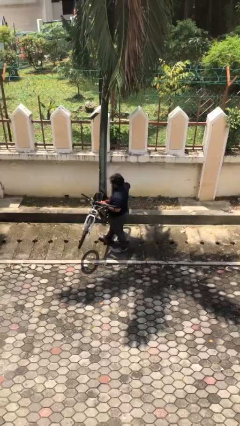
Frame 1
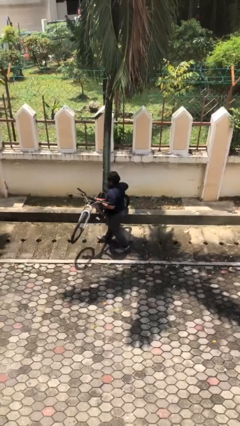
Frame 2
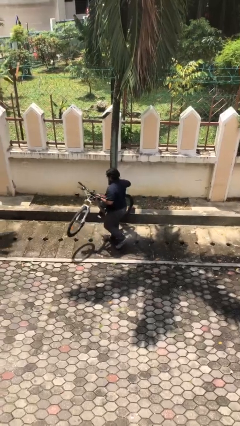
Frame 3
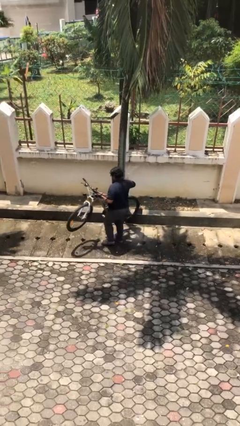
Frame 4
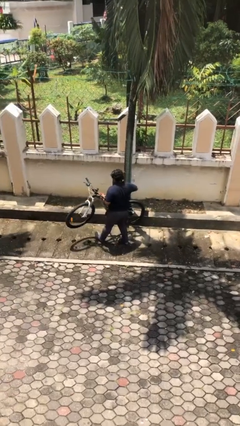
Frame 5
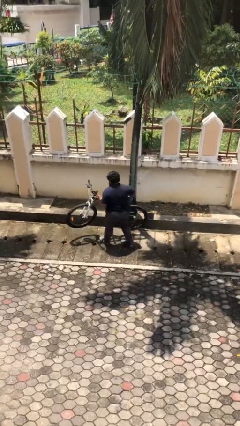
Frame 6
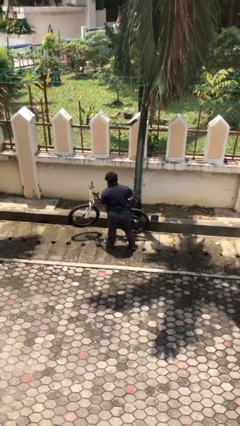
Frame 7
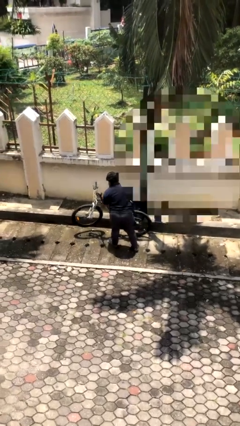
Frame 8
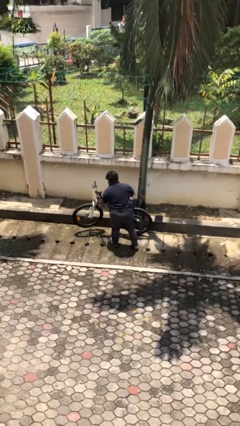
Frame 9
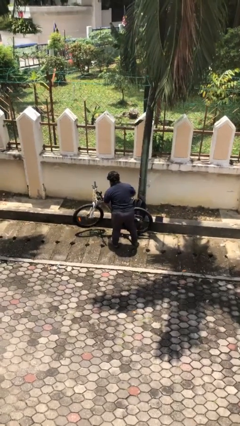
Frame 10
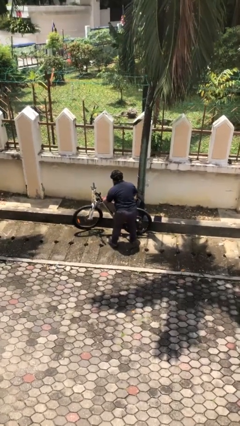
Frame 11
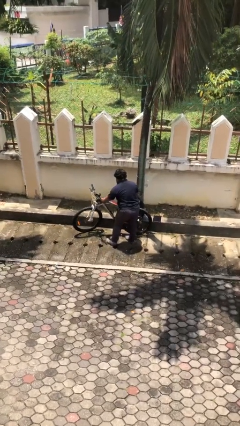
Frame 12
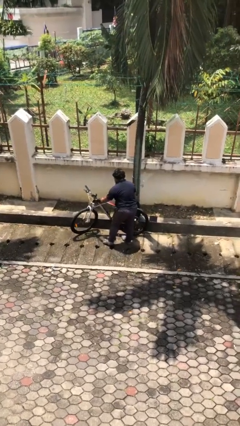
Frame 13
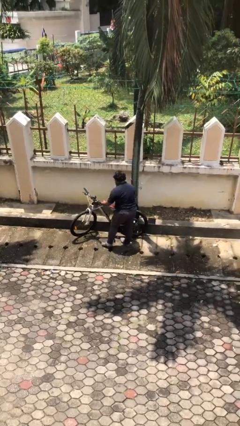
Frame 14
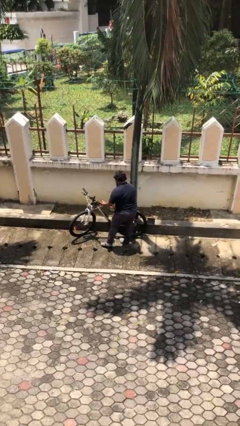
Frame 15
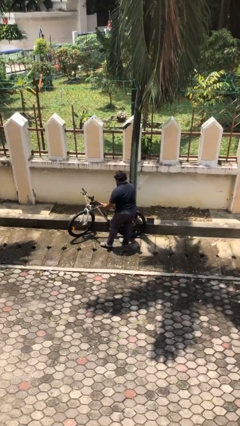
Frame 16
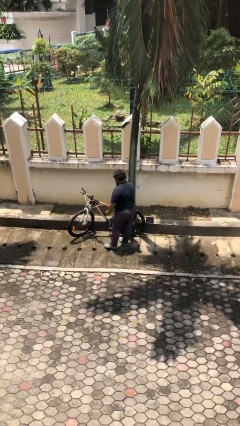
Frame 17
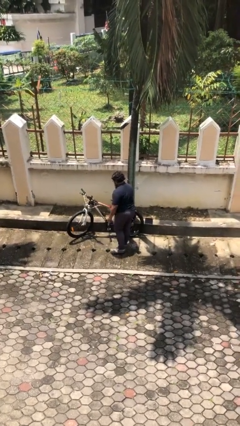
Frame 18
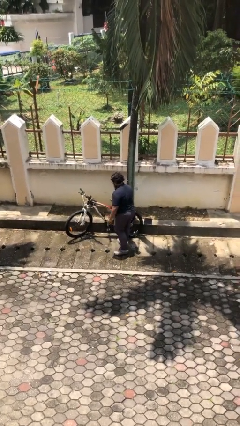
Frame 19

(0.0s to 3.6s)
person puts down object on floor

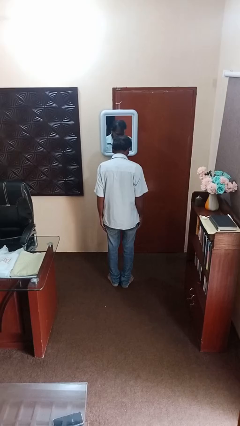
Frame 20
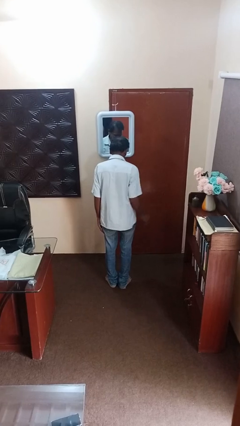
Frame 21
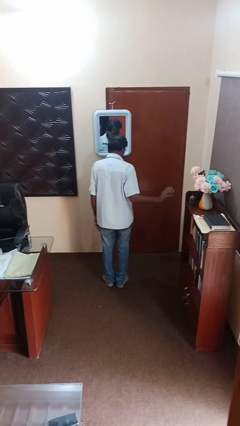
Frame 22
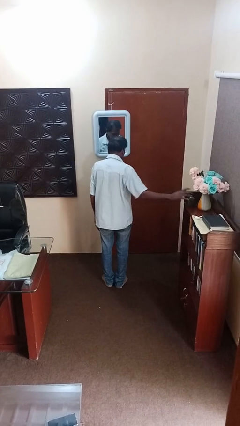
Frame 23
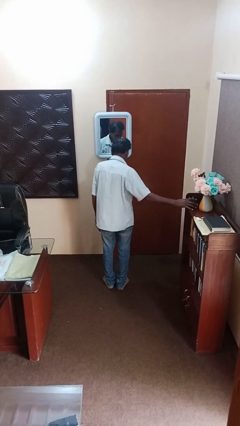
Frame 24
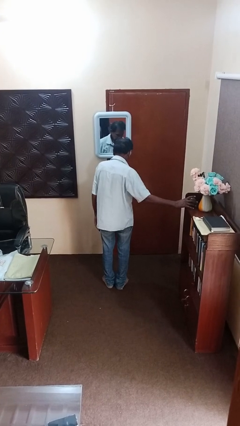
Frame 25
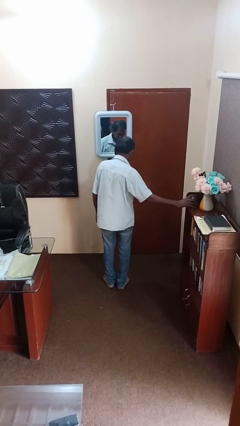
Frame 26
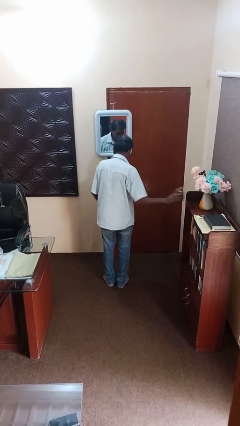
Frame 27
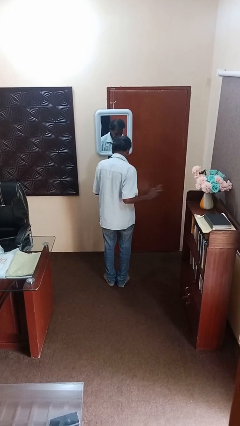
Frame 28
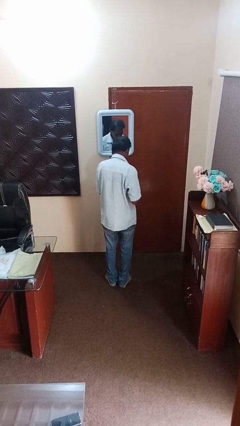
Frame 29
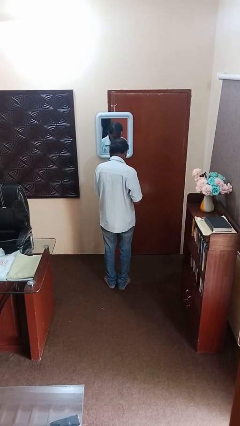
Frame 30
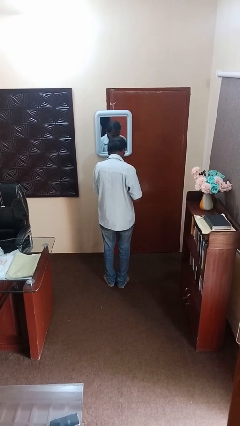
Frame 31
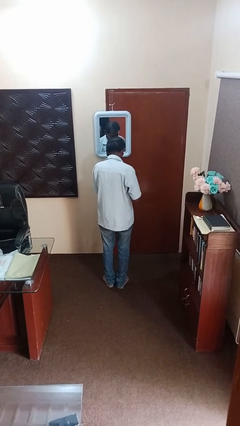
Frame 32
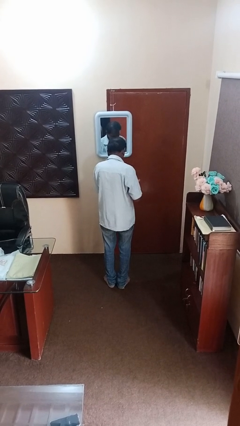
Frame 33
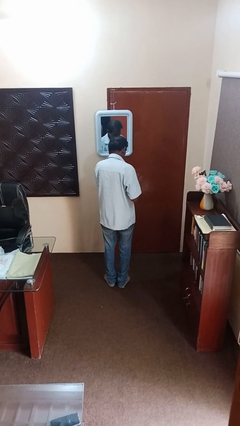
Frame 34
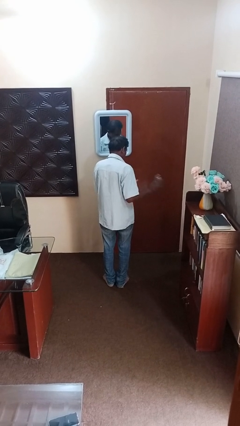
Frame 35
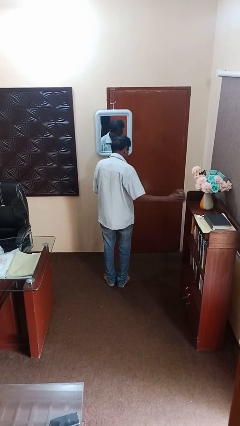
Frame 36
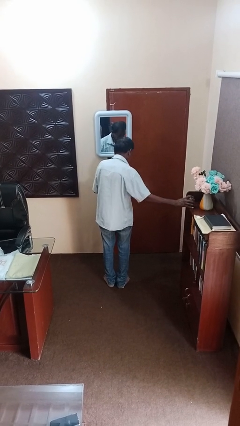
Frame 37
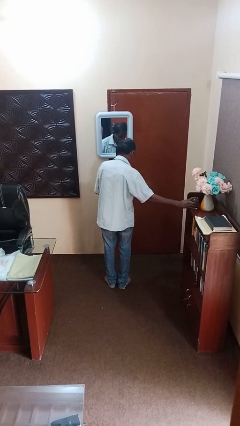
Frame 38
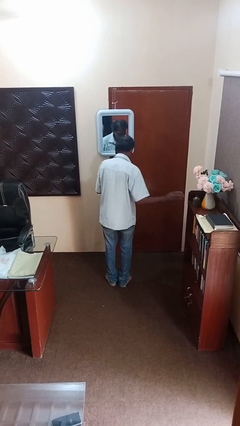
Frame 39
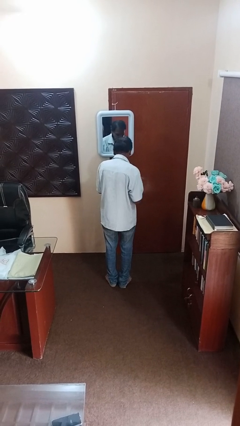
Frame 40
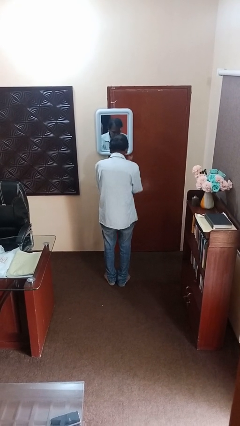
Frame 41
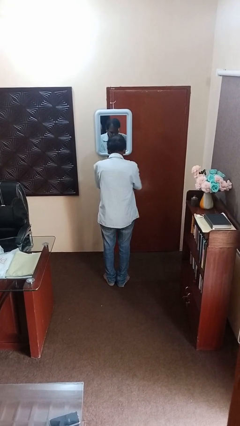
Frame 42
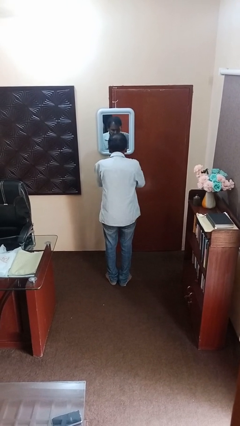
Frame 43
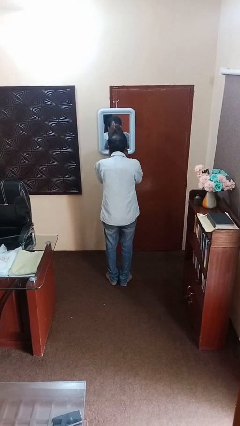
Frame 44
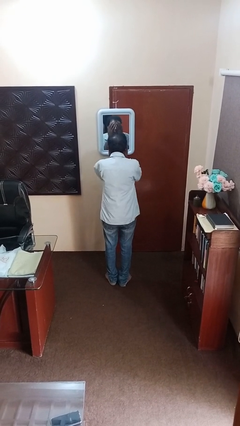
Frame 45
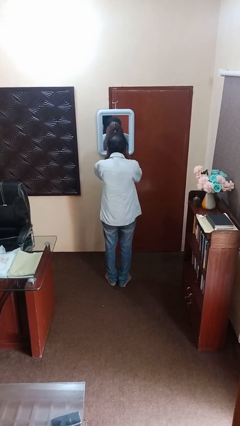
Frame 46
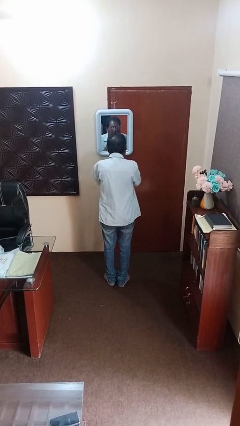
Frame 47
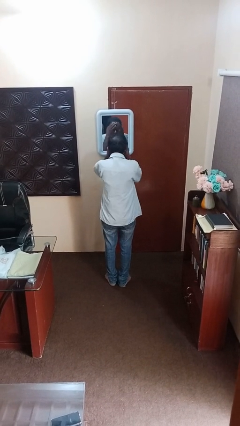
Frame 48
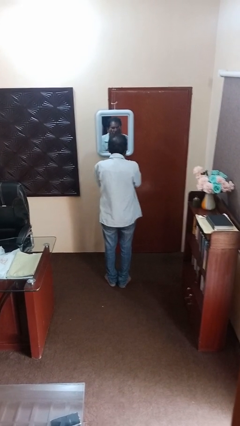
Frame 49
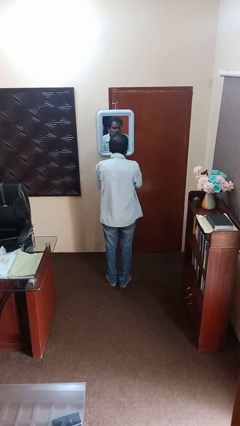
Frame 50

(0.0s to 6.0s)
person applies foundation makeup

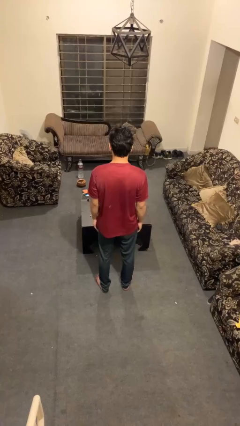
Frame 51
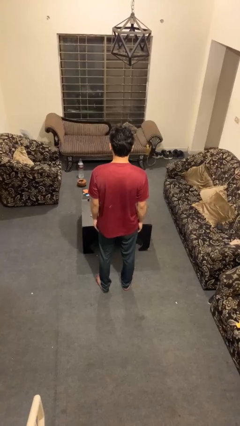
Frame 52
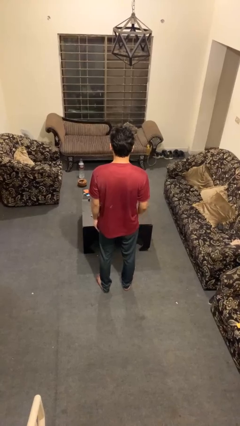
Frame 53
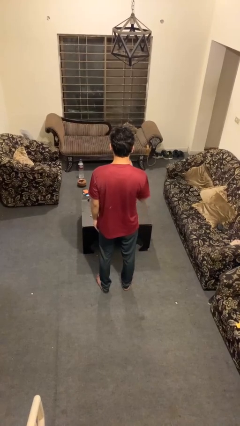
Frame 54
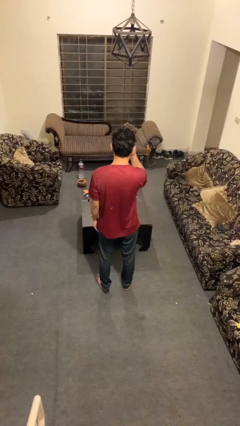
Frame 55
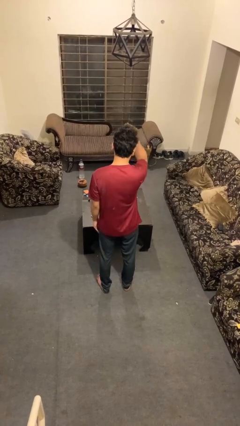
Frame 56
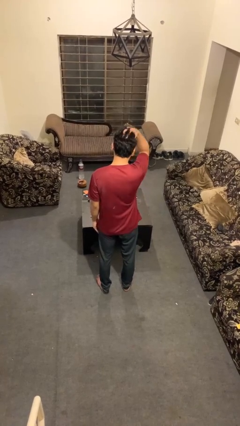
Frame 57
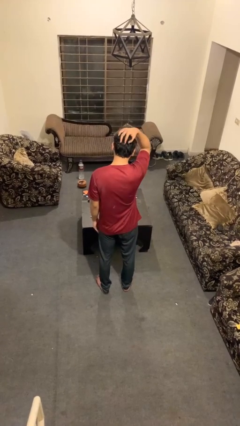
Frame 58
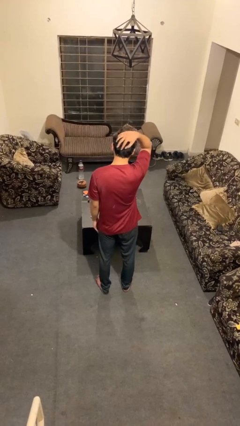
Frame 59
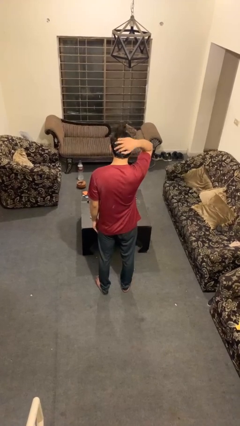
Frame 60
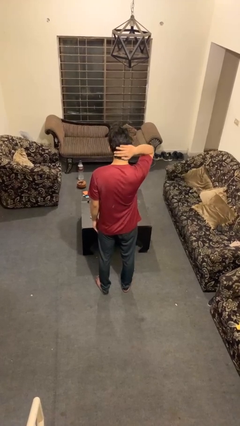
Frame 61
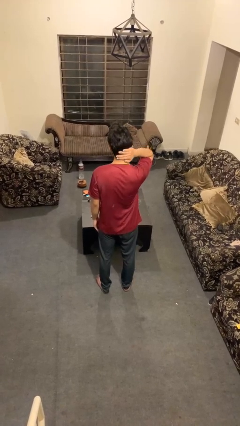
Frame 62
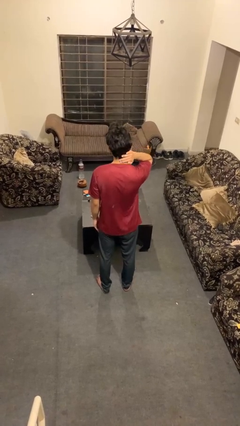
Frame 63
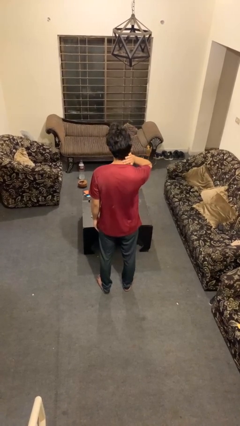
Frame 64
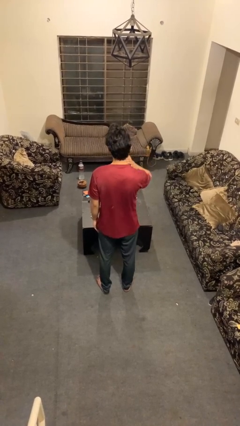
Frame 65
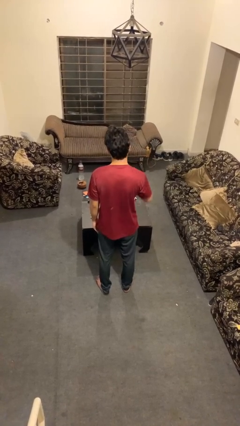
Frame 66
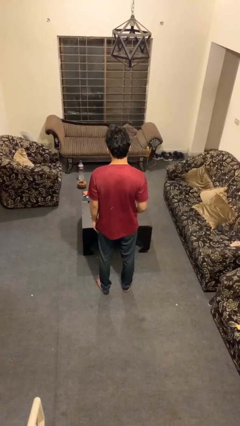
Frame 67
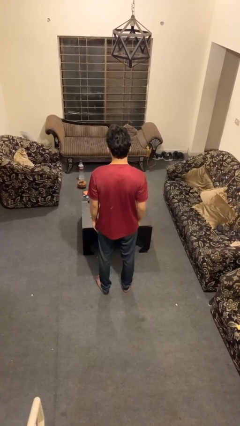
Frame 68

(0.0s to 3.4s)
person strokes hair

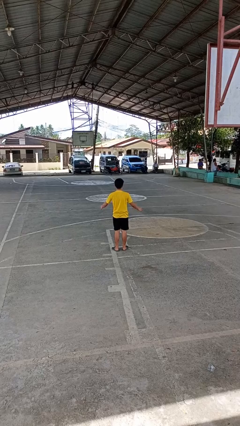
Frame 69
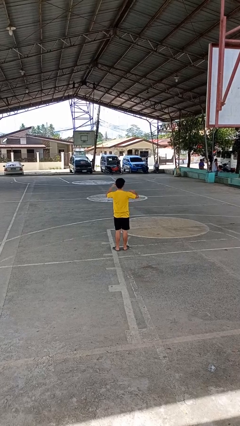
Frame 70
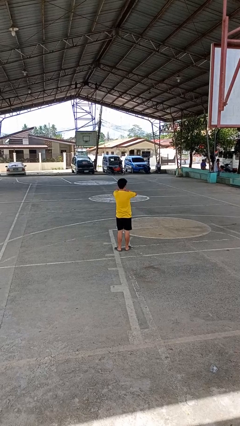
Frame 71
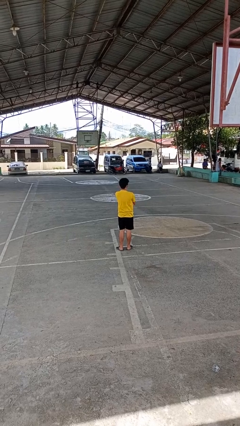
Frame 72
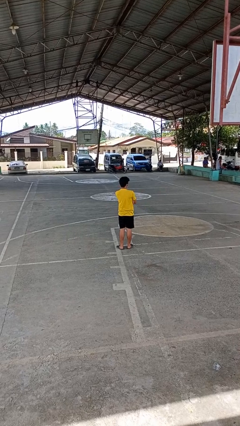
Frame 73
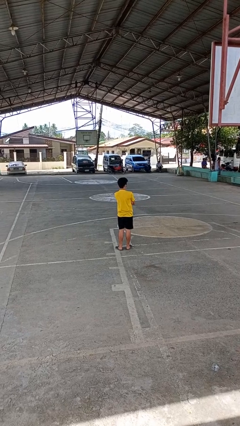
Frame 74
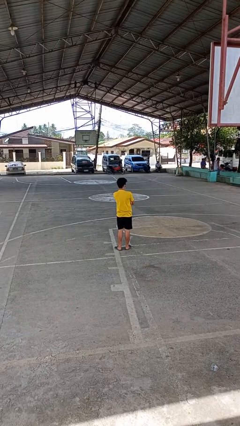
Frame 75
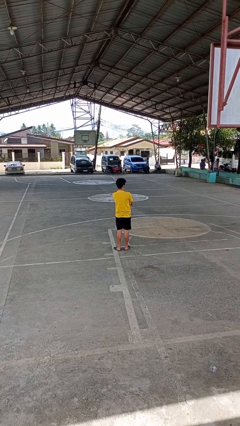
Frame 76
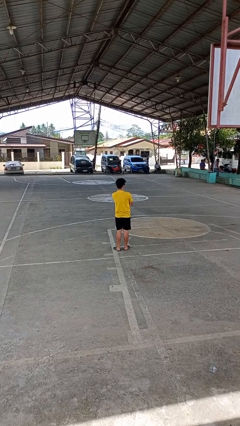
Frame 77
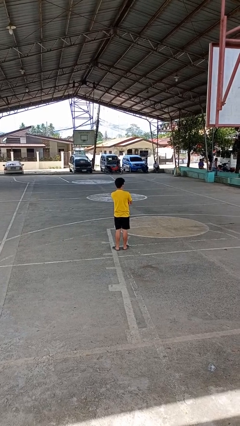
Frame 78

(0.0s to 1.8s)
person crosses arms

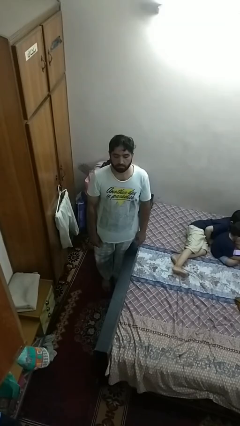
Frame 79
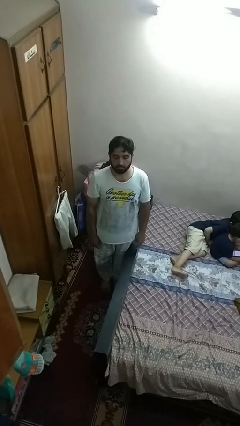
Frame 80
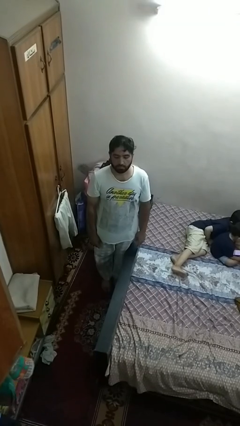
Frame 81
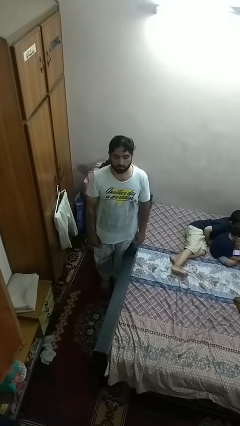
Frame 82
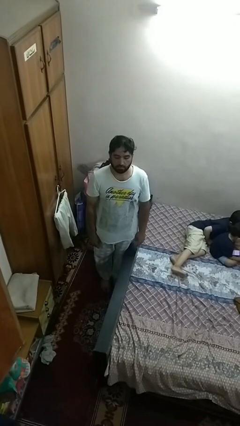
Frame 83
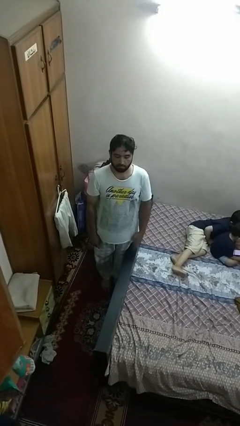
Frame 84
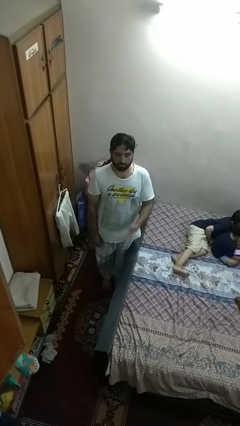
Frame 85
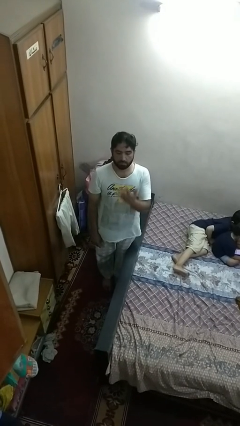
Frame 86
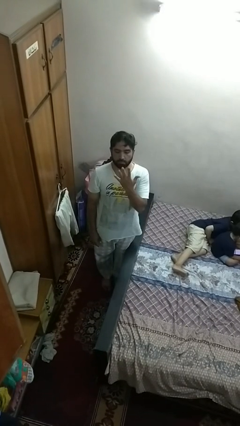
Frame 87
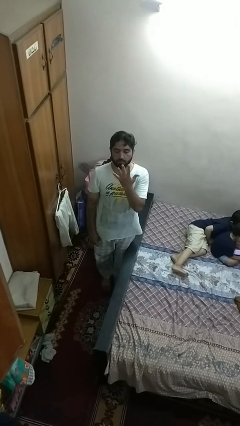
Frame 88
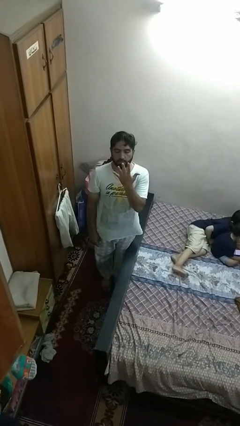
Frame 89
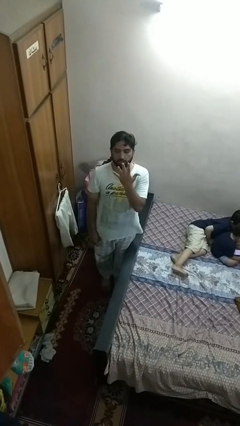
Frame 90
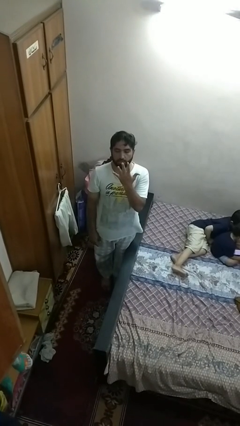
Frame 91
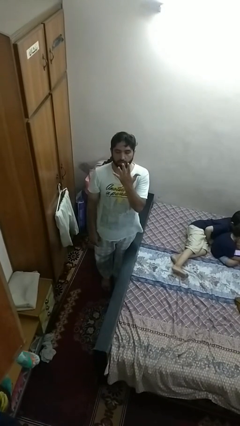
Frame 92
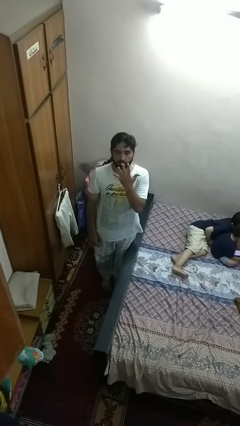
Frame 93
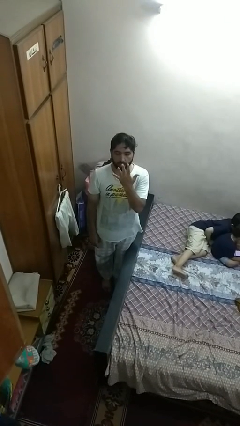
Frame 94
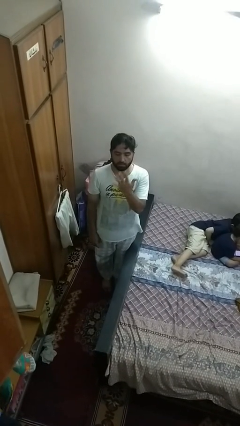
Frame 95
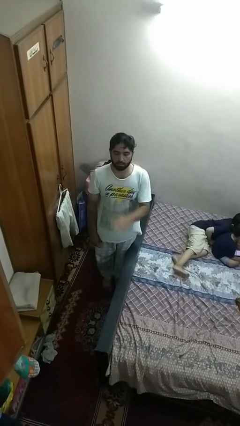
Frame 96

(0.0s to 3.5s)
person gestures number five
